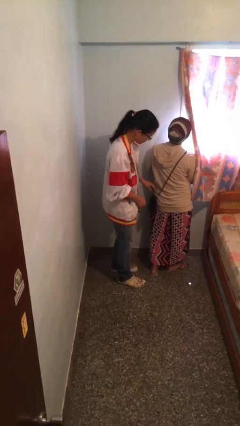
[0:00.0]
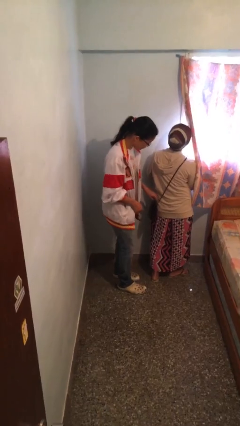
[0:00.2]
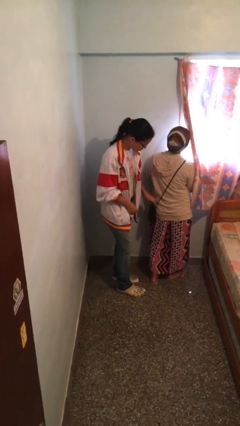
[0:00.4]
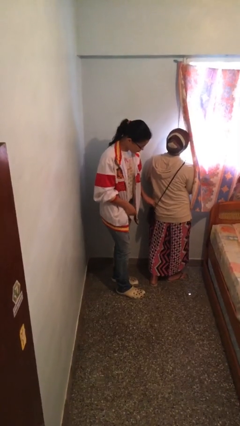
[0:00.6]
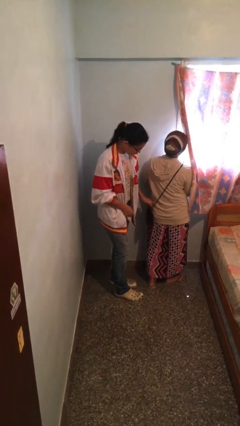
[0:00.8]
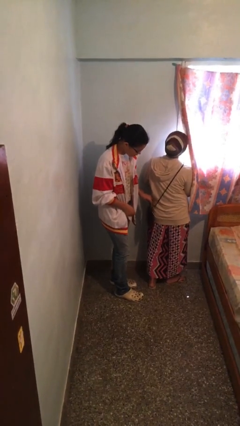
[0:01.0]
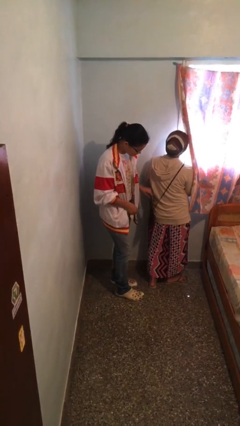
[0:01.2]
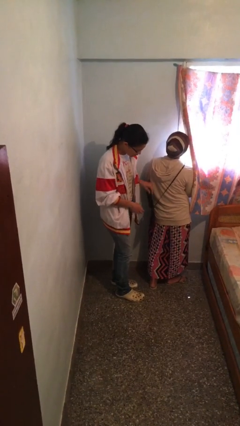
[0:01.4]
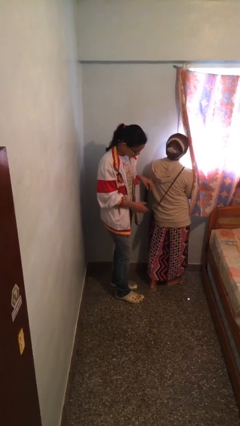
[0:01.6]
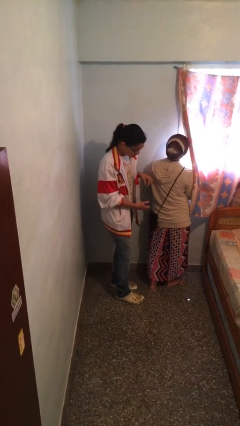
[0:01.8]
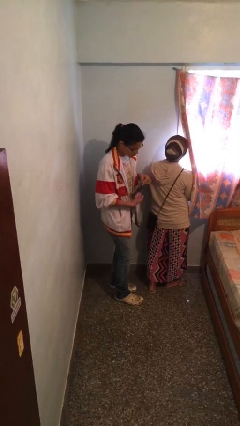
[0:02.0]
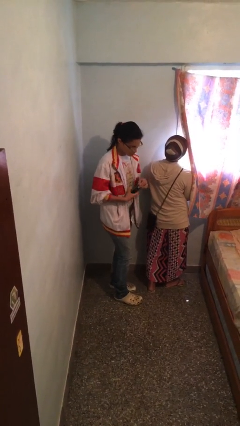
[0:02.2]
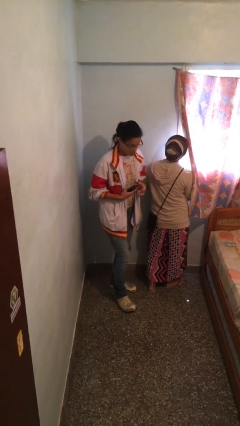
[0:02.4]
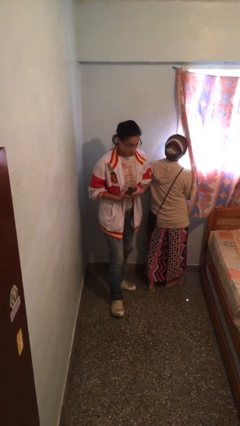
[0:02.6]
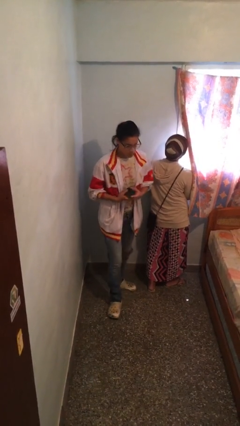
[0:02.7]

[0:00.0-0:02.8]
person steals object from person

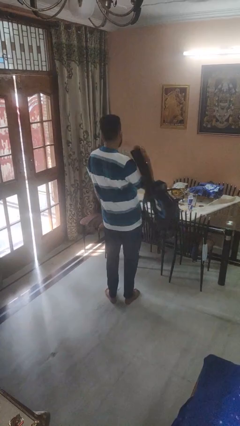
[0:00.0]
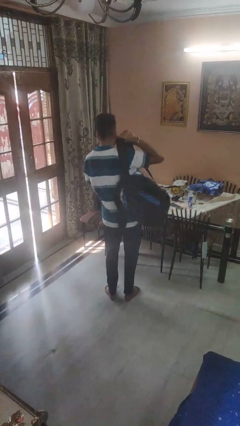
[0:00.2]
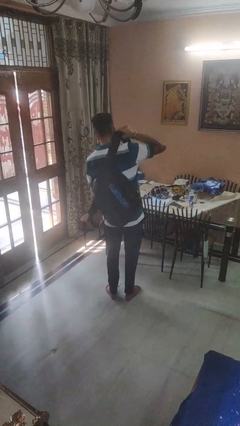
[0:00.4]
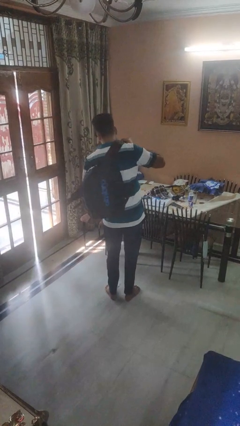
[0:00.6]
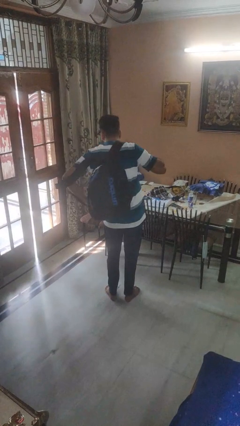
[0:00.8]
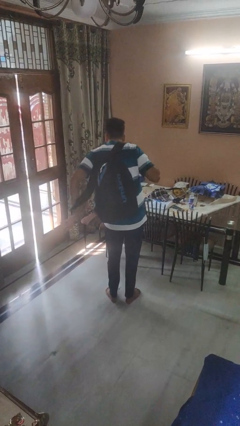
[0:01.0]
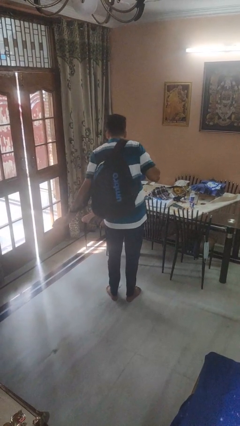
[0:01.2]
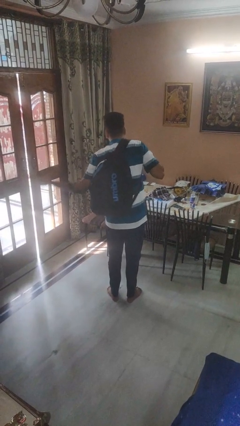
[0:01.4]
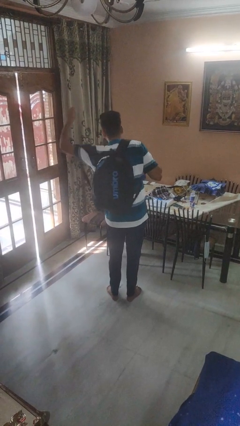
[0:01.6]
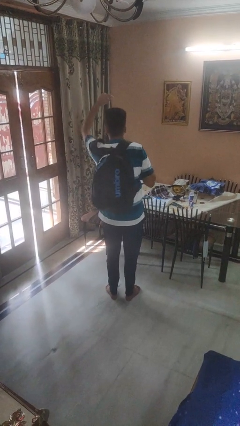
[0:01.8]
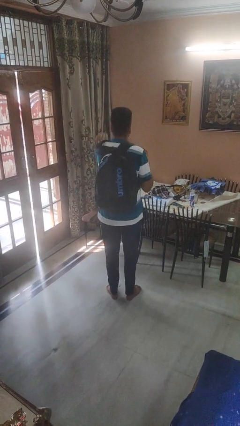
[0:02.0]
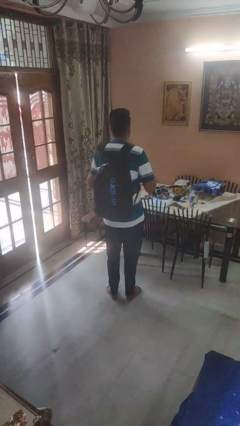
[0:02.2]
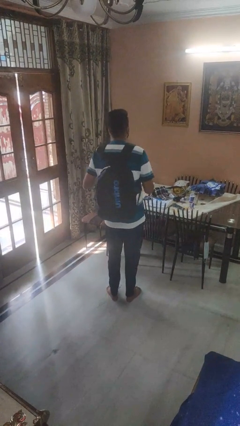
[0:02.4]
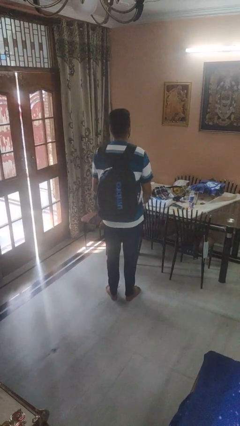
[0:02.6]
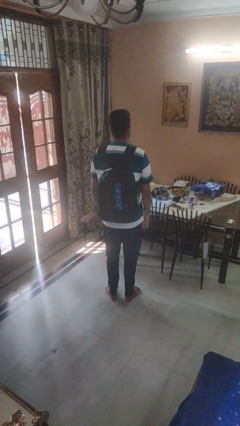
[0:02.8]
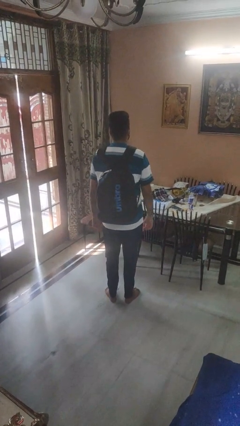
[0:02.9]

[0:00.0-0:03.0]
person puts on backpack

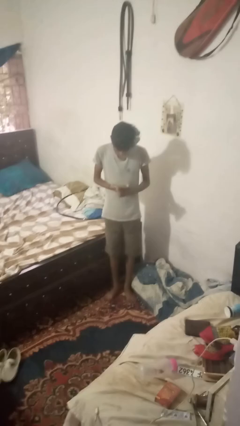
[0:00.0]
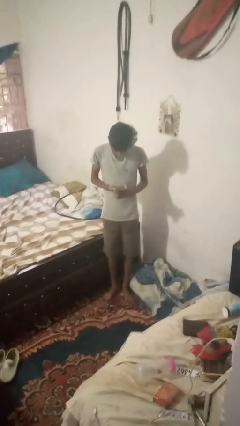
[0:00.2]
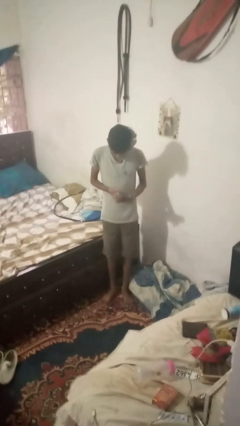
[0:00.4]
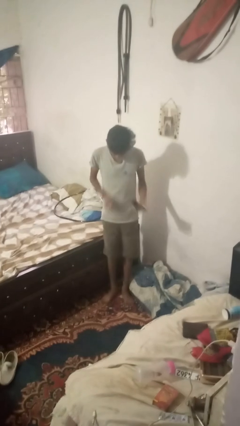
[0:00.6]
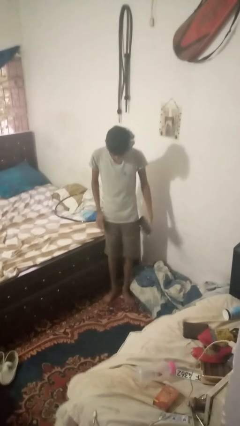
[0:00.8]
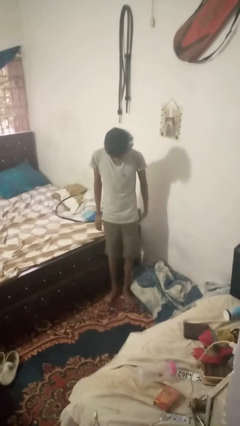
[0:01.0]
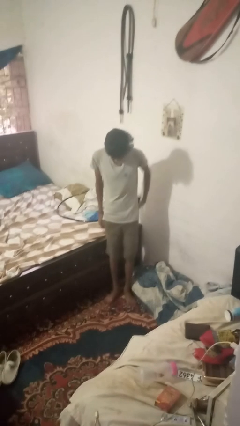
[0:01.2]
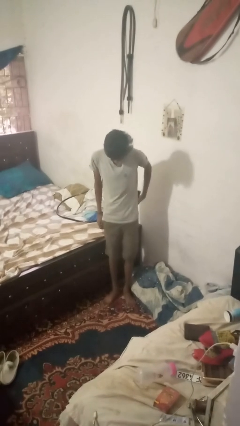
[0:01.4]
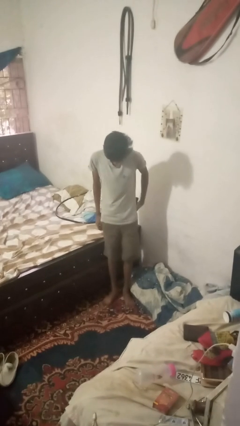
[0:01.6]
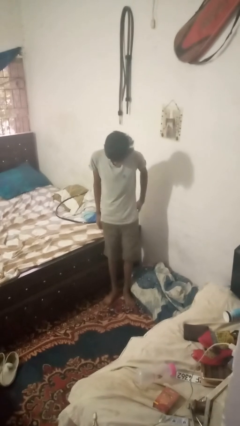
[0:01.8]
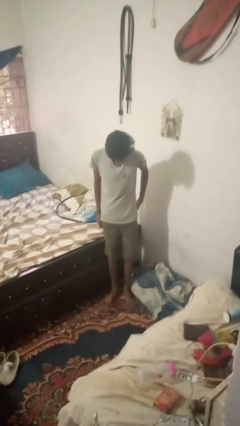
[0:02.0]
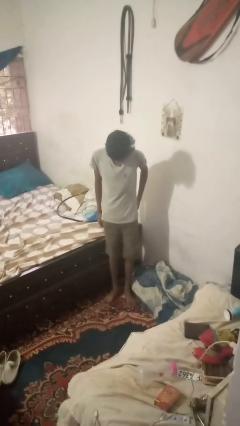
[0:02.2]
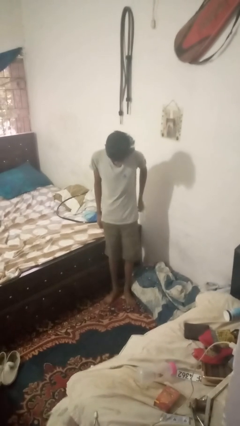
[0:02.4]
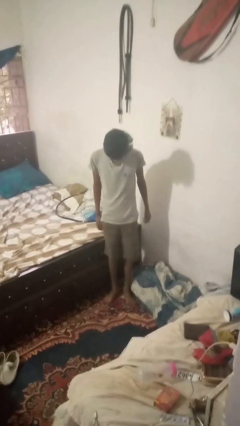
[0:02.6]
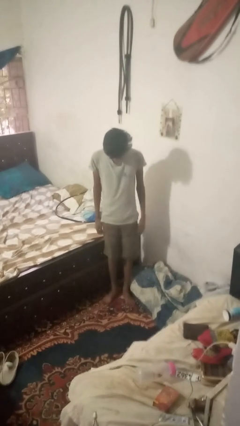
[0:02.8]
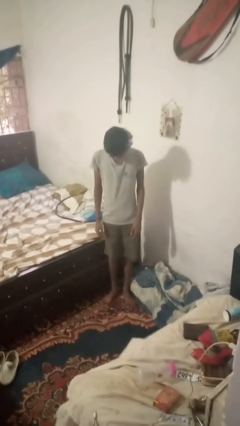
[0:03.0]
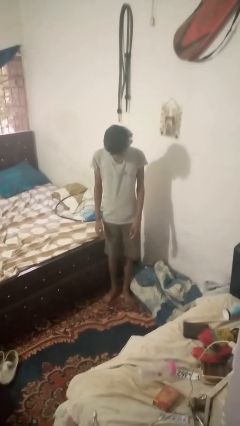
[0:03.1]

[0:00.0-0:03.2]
person puts phone into pocket

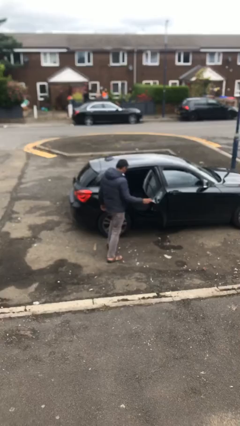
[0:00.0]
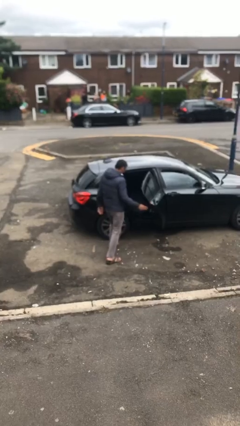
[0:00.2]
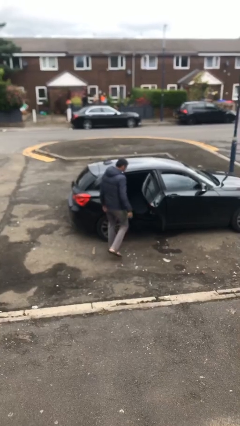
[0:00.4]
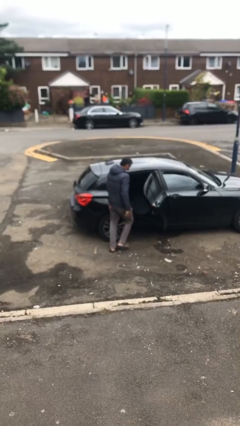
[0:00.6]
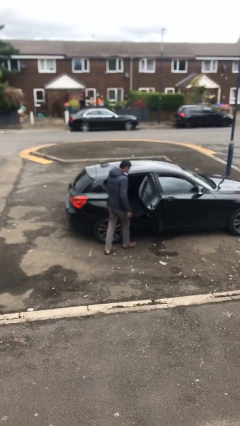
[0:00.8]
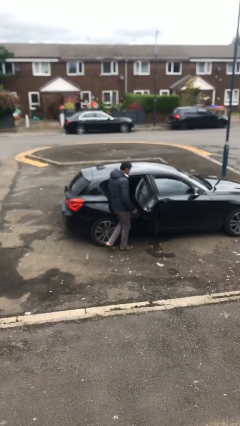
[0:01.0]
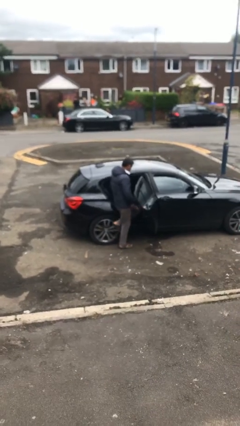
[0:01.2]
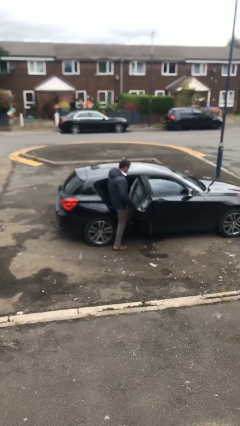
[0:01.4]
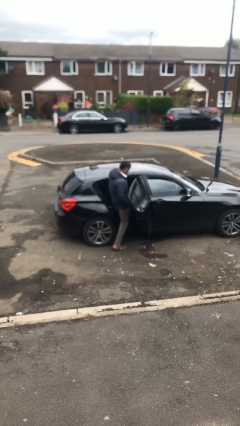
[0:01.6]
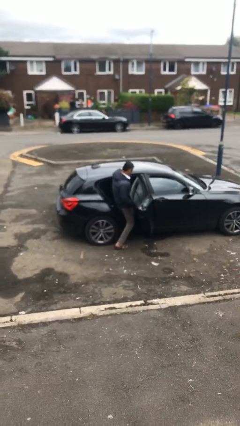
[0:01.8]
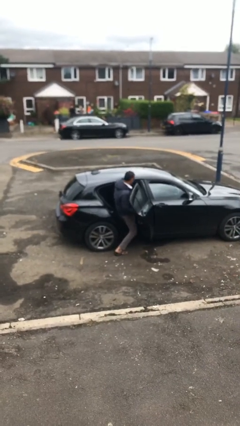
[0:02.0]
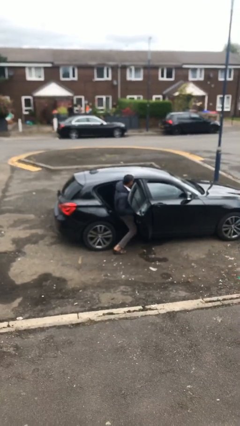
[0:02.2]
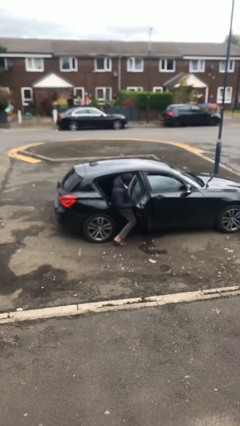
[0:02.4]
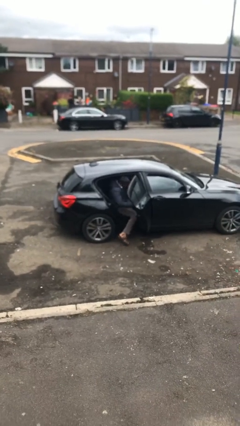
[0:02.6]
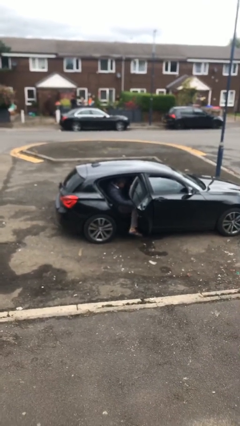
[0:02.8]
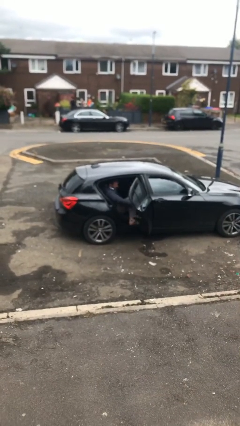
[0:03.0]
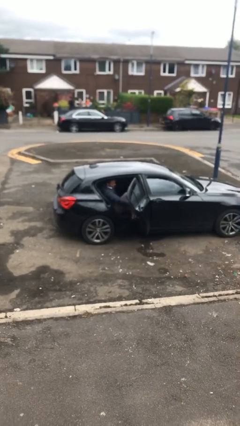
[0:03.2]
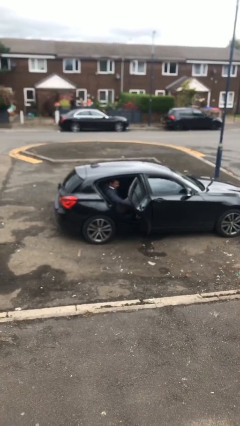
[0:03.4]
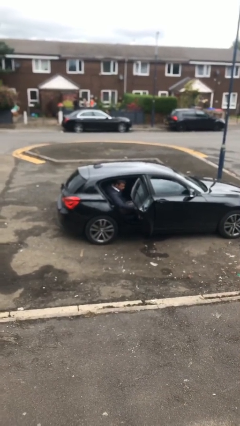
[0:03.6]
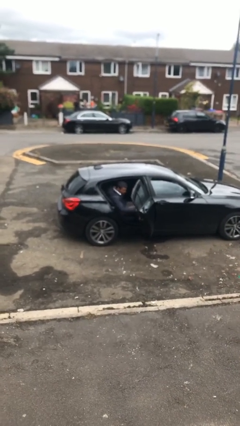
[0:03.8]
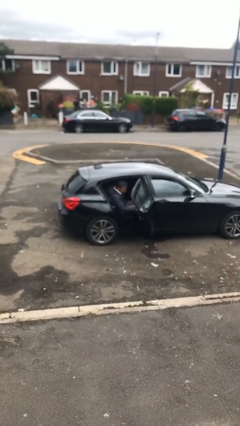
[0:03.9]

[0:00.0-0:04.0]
person enters car

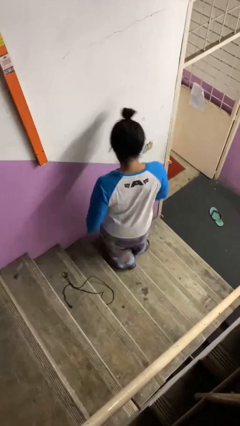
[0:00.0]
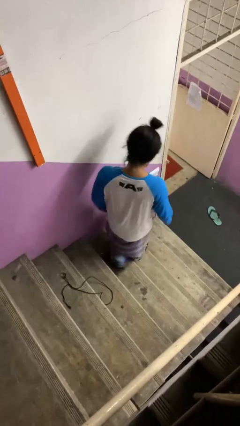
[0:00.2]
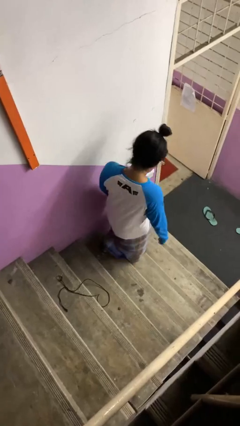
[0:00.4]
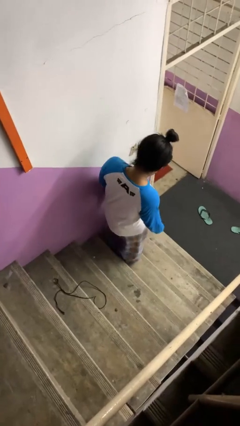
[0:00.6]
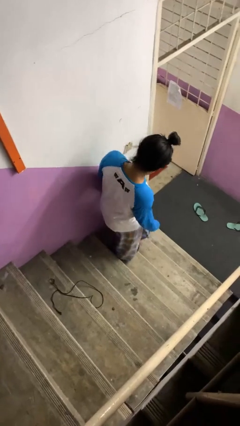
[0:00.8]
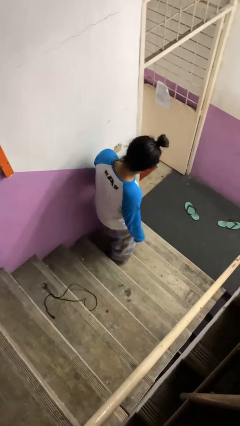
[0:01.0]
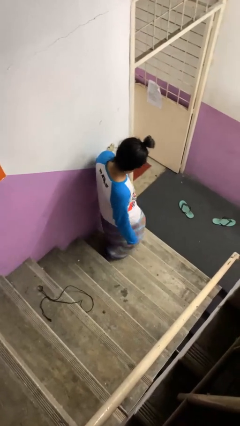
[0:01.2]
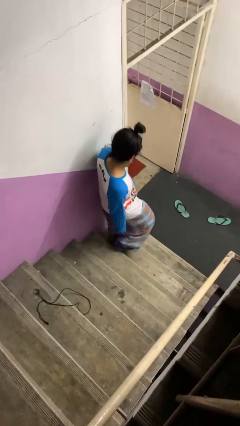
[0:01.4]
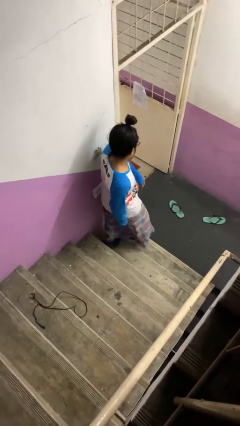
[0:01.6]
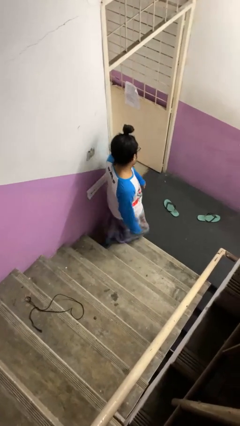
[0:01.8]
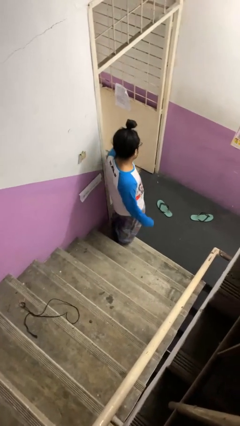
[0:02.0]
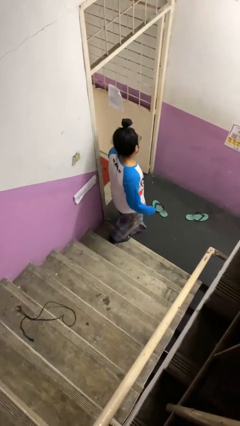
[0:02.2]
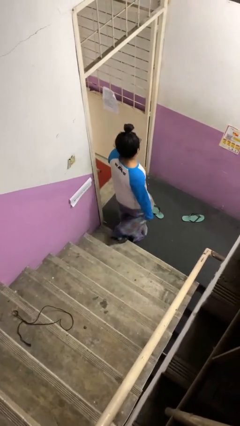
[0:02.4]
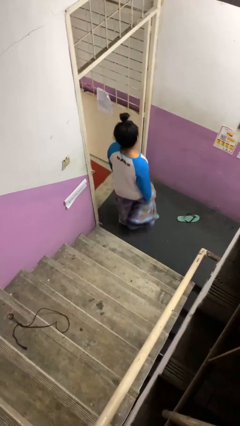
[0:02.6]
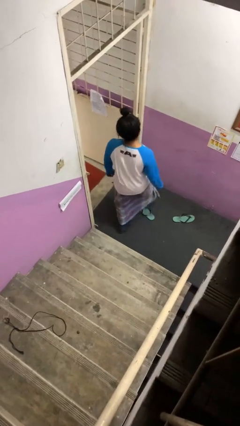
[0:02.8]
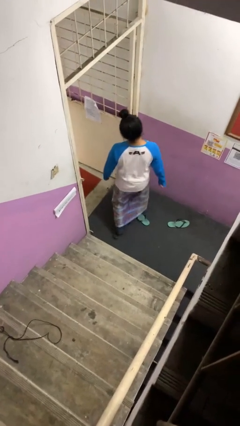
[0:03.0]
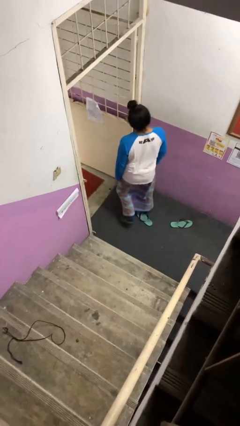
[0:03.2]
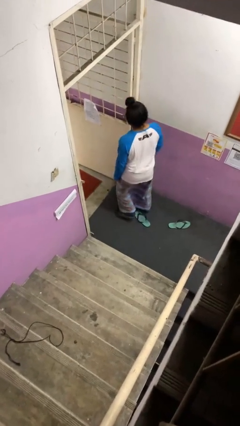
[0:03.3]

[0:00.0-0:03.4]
person climbs down stairs

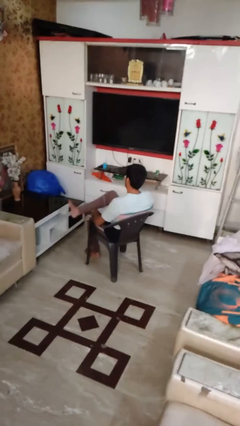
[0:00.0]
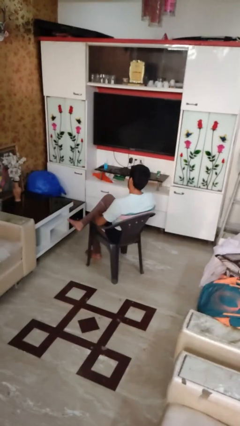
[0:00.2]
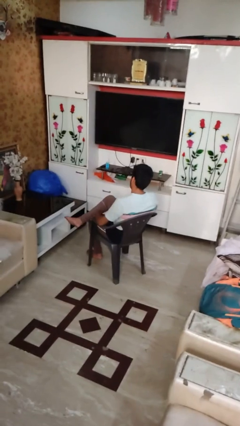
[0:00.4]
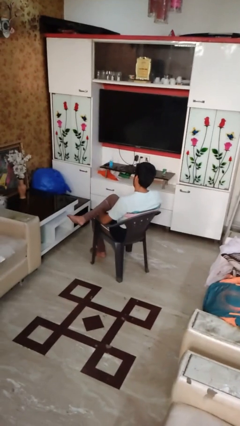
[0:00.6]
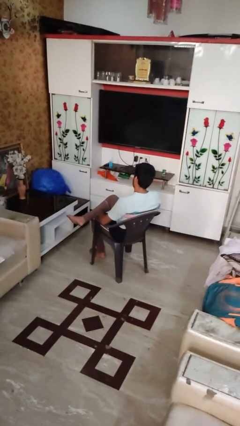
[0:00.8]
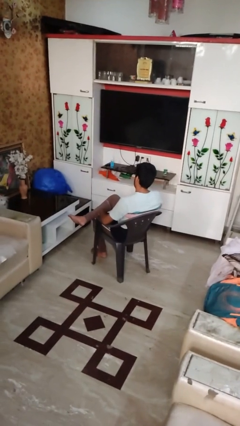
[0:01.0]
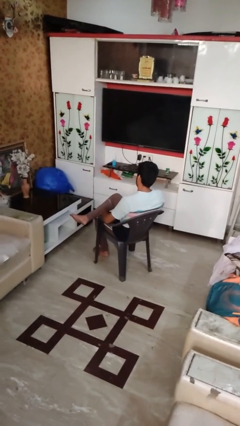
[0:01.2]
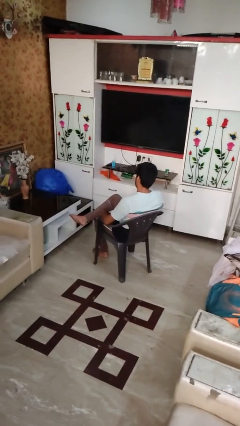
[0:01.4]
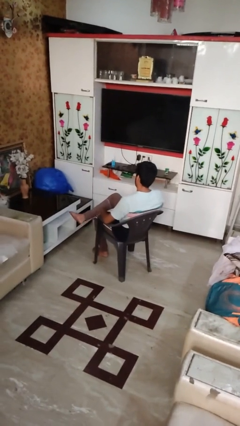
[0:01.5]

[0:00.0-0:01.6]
person crosses legs
